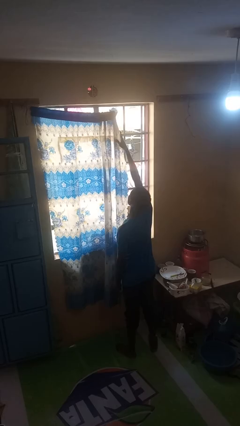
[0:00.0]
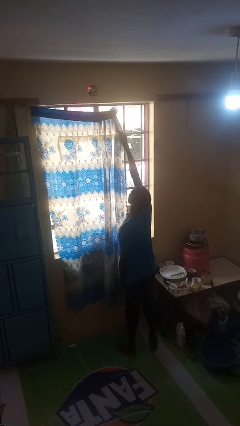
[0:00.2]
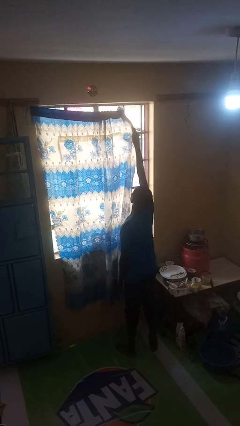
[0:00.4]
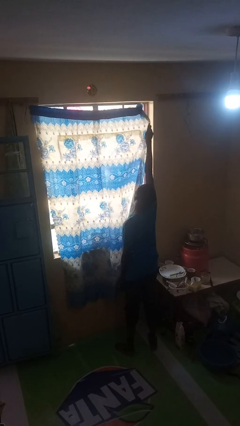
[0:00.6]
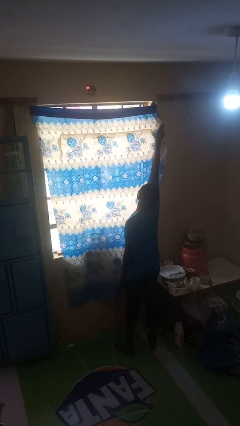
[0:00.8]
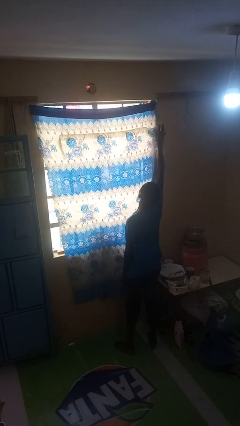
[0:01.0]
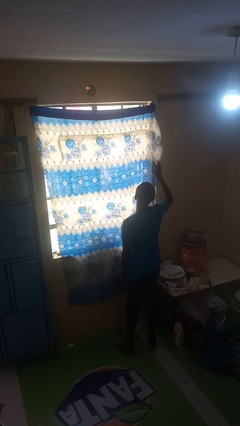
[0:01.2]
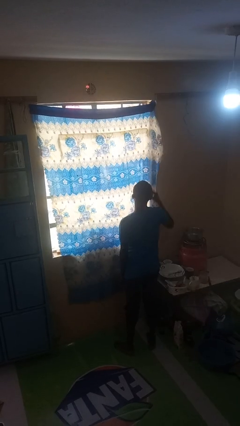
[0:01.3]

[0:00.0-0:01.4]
person closes curtains

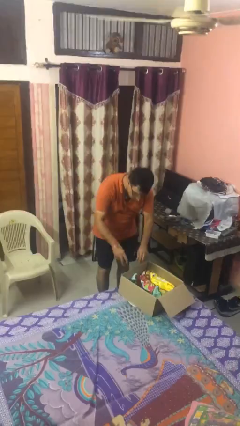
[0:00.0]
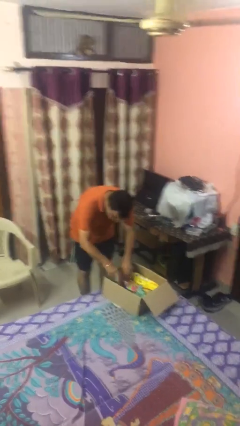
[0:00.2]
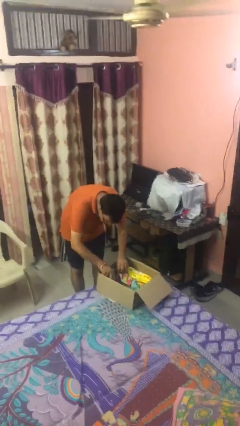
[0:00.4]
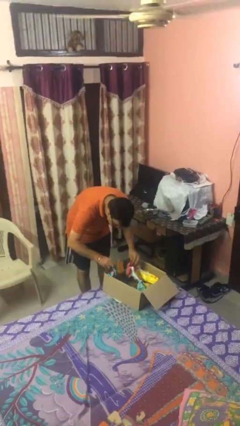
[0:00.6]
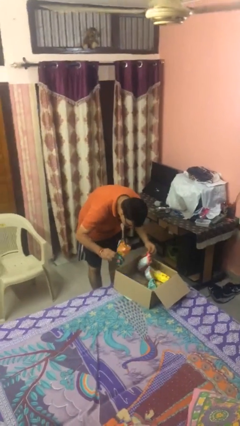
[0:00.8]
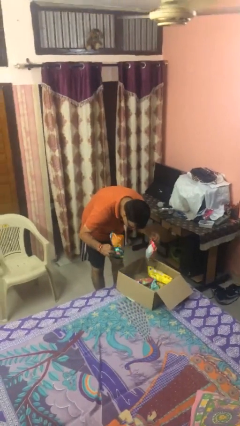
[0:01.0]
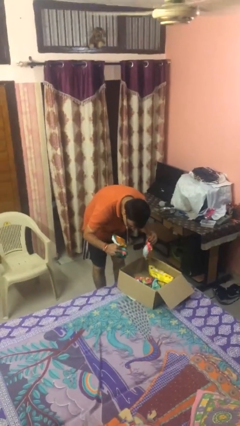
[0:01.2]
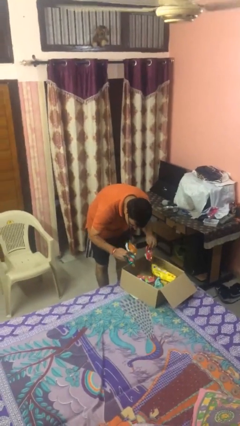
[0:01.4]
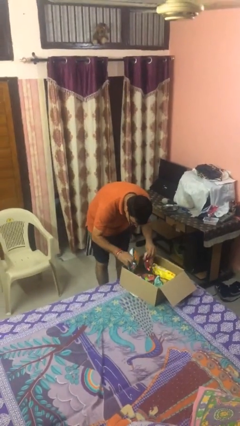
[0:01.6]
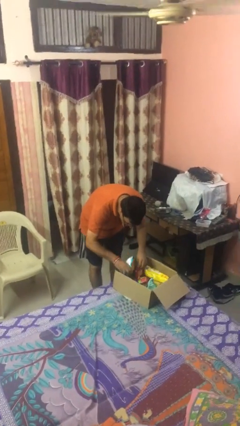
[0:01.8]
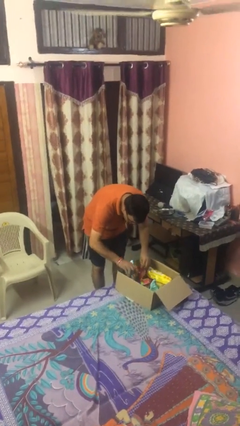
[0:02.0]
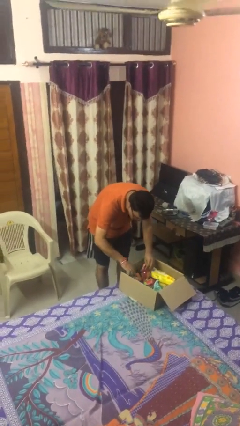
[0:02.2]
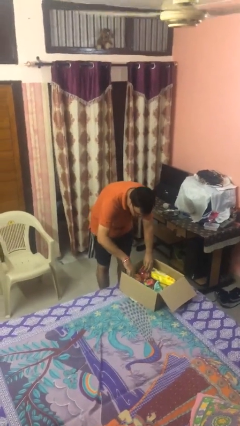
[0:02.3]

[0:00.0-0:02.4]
person searches in box

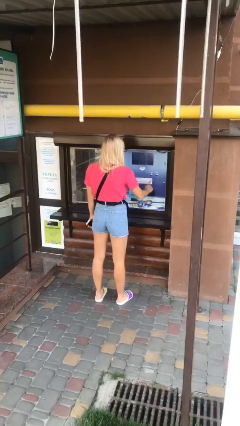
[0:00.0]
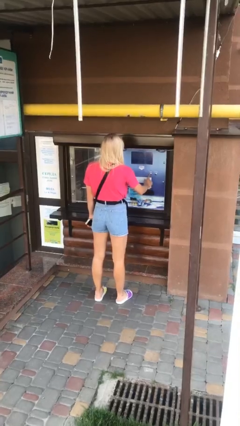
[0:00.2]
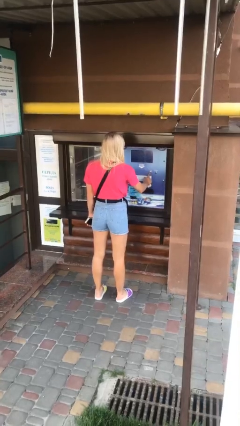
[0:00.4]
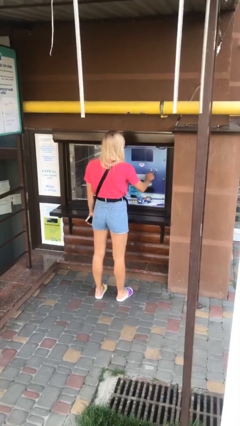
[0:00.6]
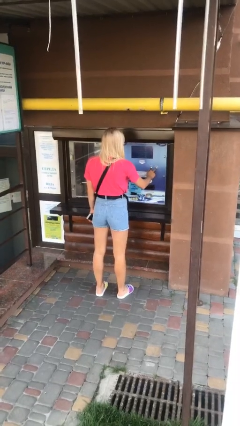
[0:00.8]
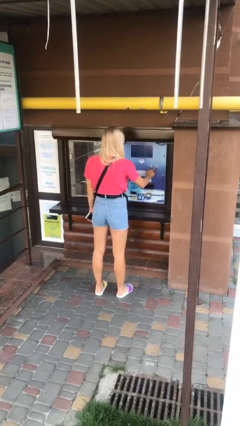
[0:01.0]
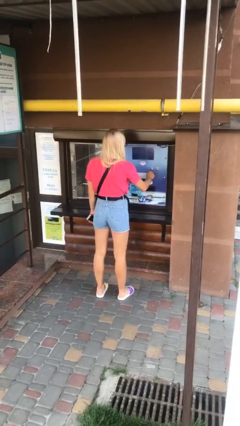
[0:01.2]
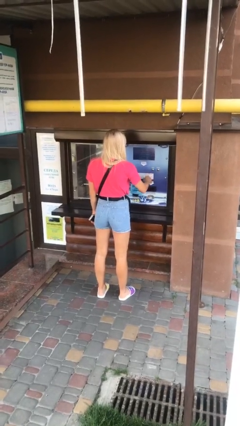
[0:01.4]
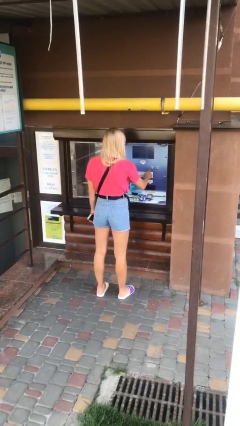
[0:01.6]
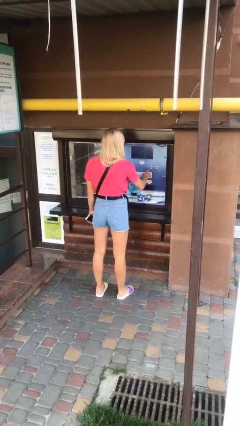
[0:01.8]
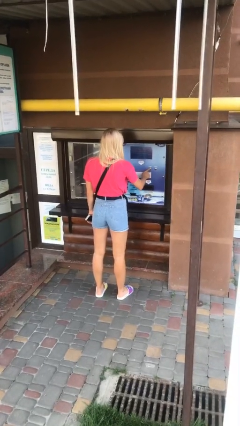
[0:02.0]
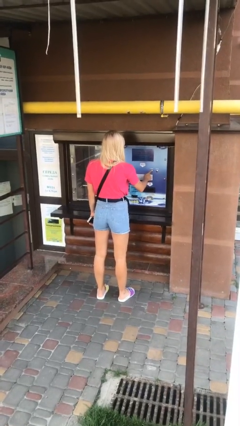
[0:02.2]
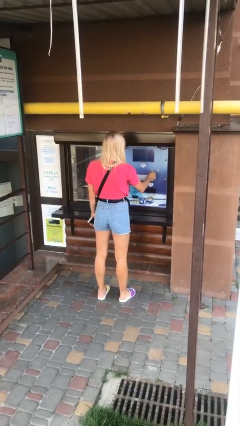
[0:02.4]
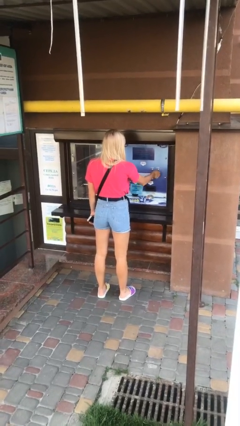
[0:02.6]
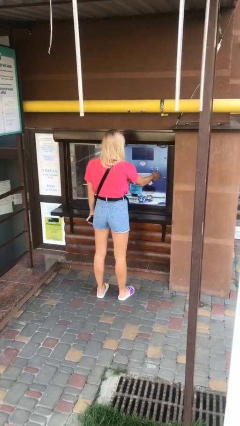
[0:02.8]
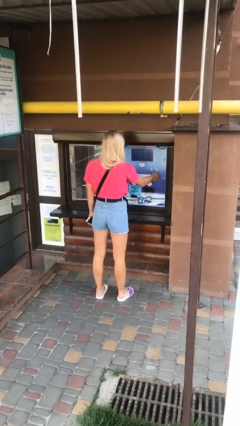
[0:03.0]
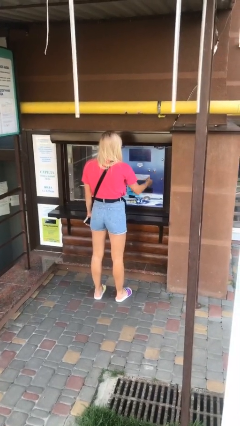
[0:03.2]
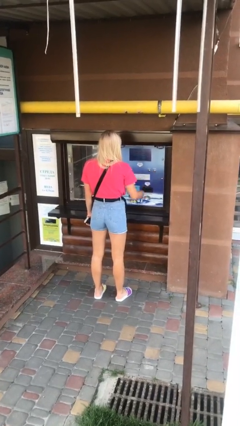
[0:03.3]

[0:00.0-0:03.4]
person purchases from machine

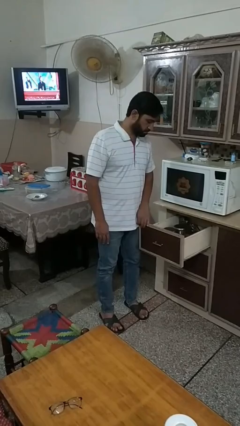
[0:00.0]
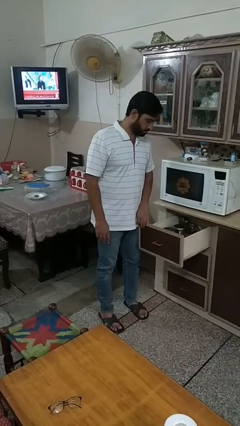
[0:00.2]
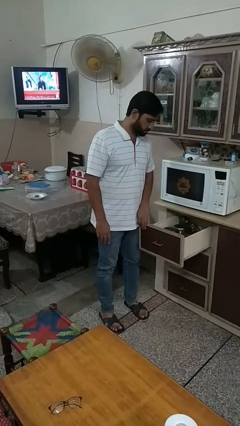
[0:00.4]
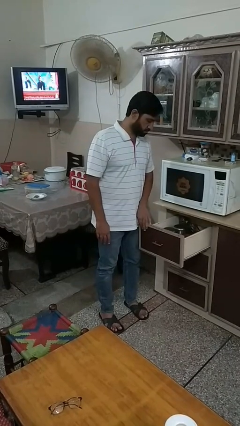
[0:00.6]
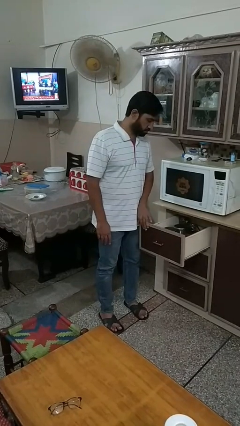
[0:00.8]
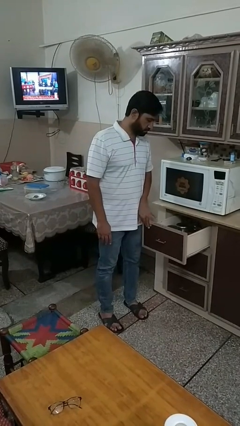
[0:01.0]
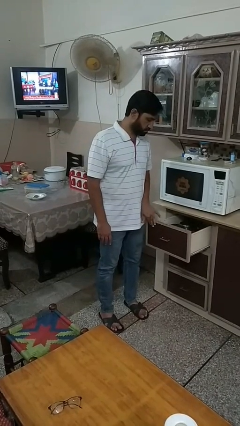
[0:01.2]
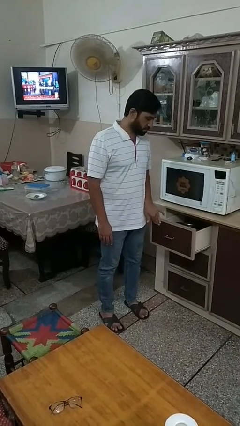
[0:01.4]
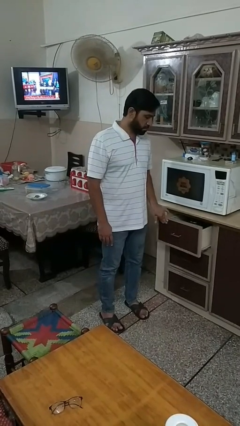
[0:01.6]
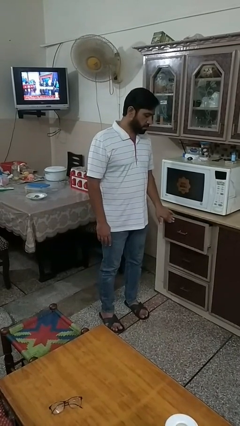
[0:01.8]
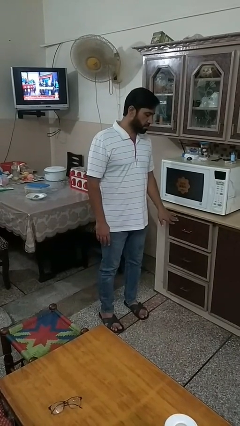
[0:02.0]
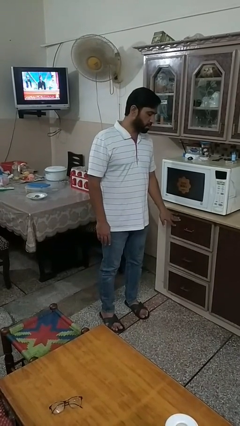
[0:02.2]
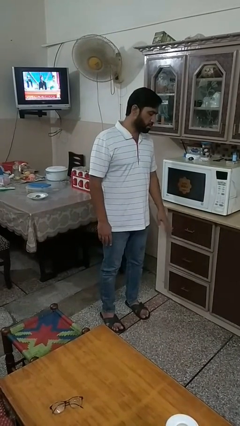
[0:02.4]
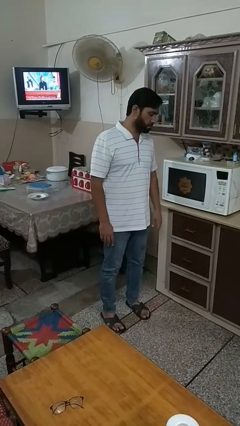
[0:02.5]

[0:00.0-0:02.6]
person closes kitchen drawer

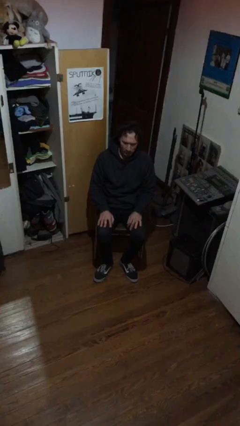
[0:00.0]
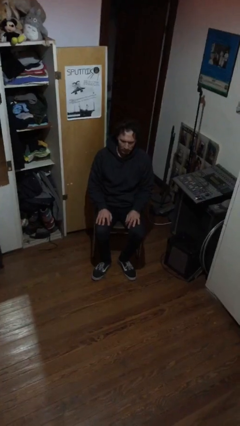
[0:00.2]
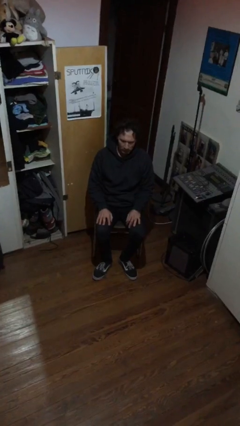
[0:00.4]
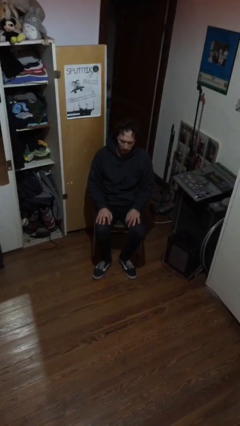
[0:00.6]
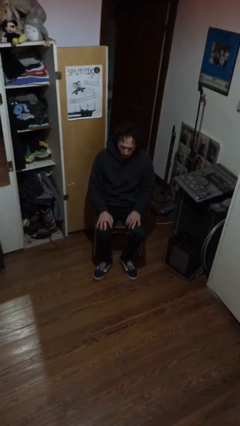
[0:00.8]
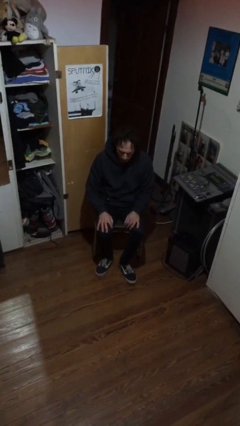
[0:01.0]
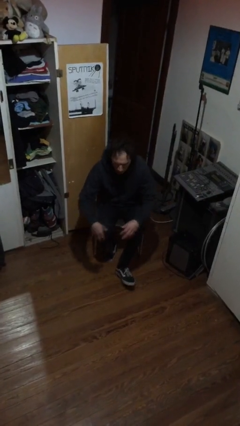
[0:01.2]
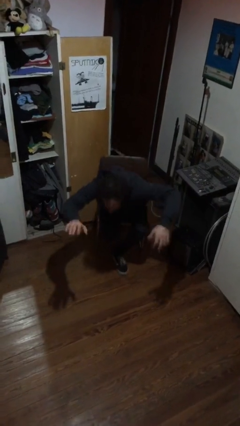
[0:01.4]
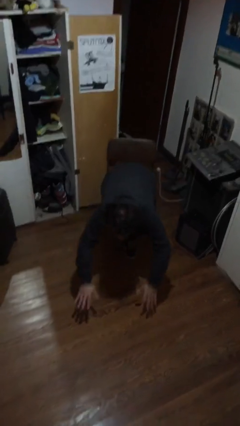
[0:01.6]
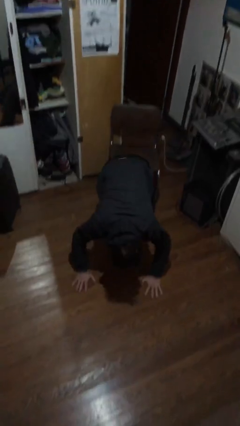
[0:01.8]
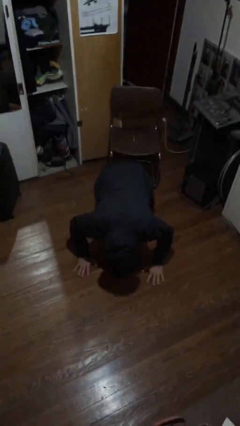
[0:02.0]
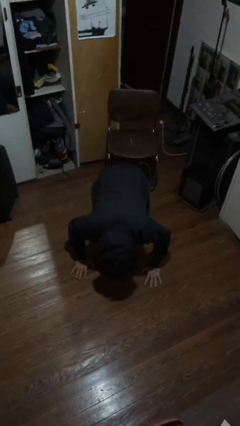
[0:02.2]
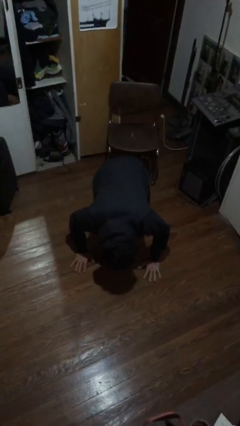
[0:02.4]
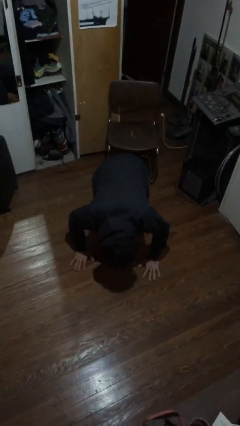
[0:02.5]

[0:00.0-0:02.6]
person falls from chair

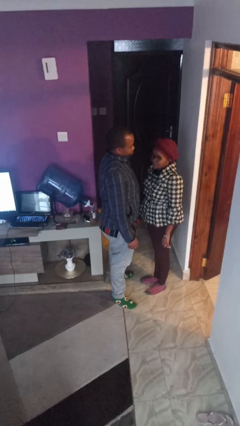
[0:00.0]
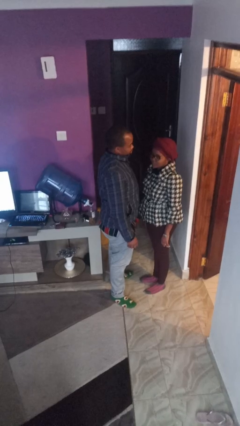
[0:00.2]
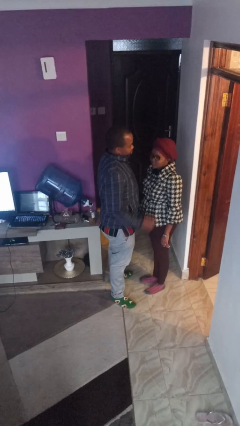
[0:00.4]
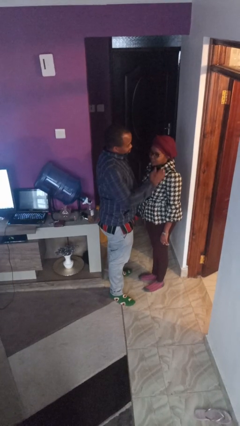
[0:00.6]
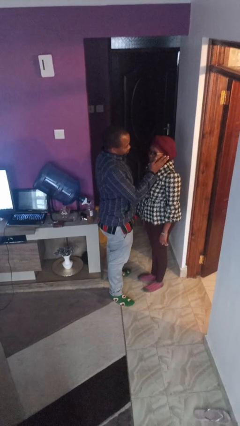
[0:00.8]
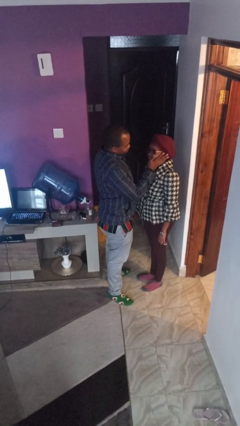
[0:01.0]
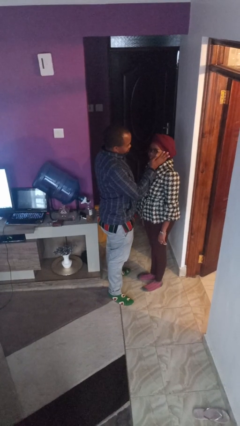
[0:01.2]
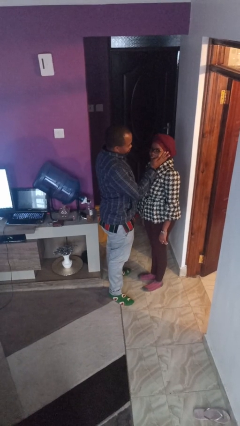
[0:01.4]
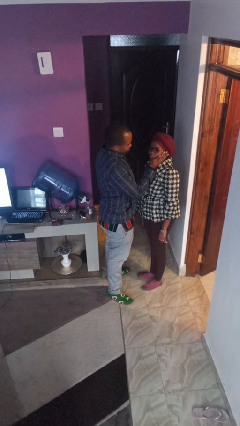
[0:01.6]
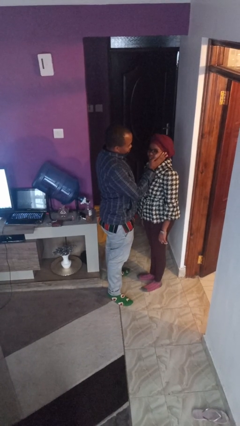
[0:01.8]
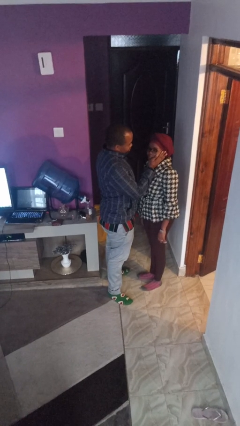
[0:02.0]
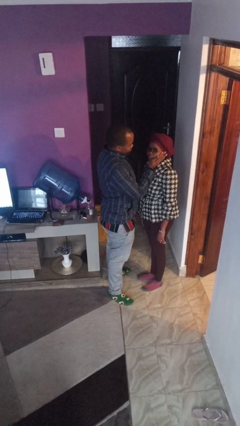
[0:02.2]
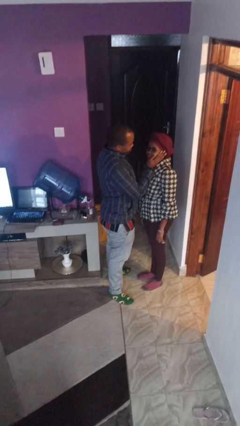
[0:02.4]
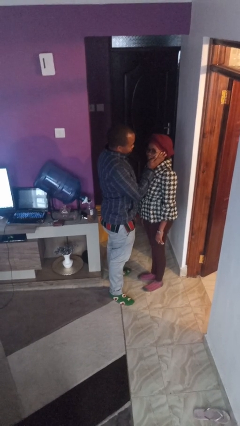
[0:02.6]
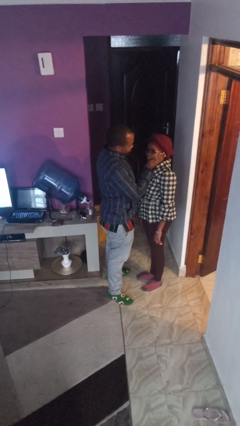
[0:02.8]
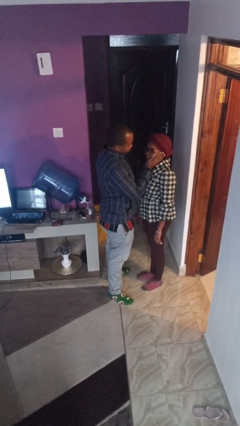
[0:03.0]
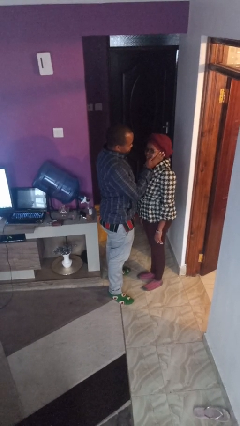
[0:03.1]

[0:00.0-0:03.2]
person touches face of person

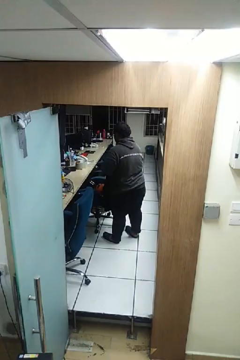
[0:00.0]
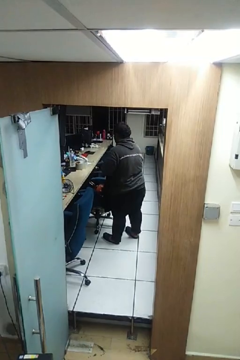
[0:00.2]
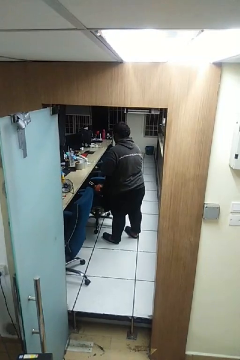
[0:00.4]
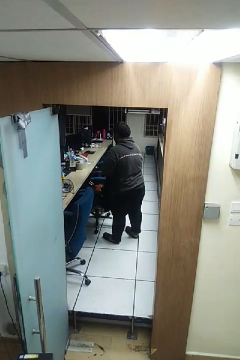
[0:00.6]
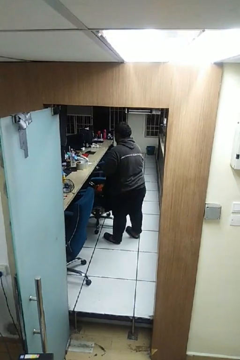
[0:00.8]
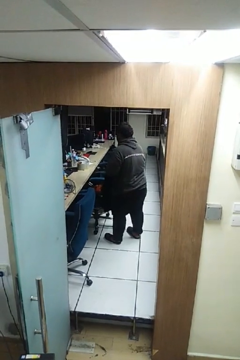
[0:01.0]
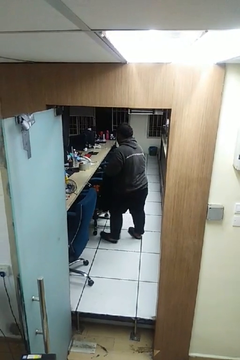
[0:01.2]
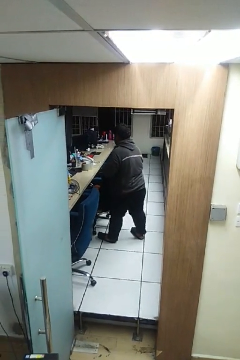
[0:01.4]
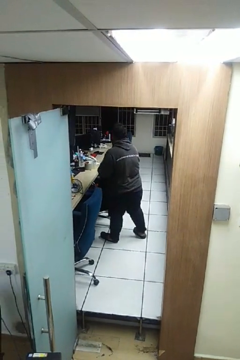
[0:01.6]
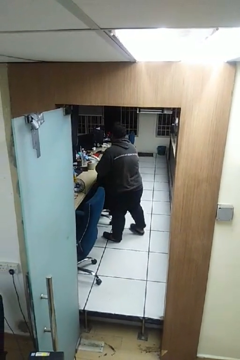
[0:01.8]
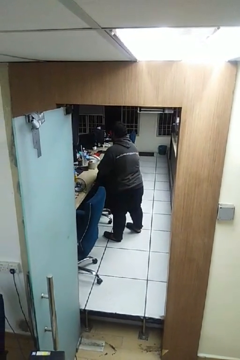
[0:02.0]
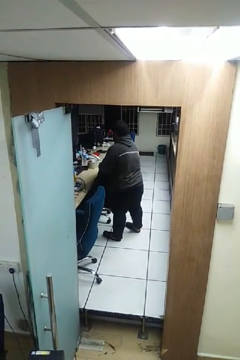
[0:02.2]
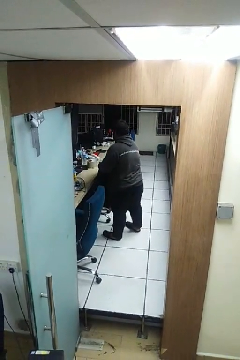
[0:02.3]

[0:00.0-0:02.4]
person pushes in chair
